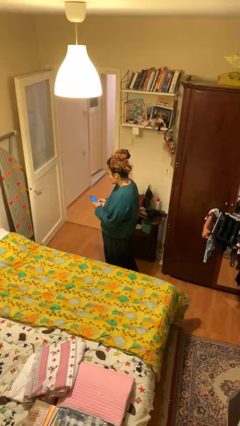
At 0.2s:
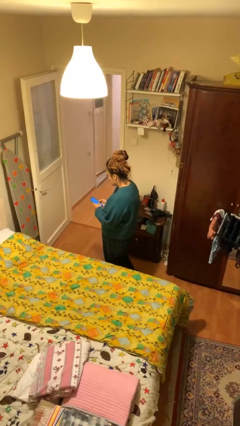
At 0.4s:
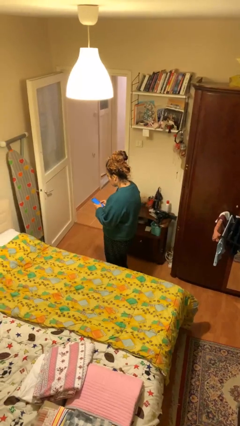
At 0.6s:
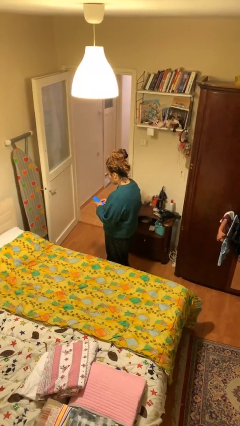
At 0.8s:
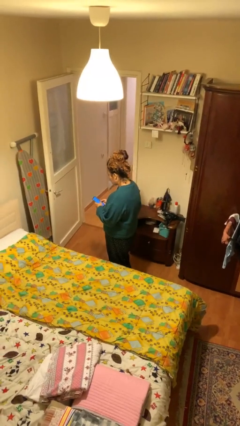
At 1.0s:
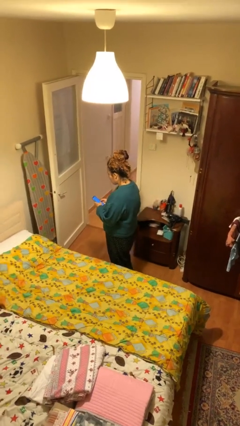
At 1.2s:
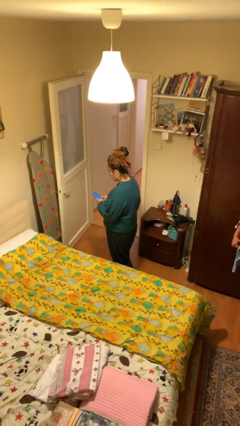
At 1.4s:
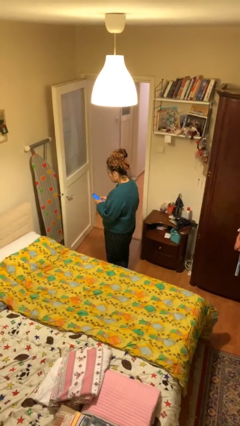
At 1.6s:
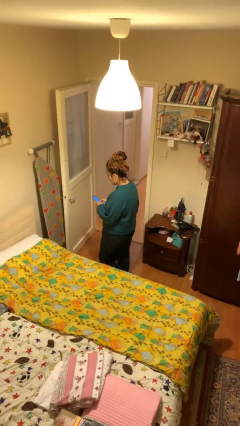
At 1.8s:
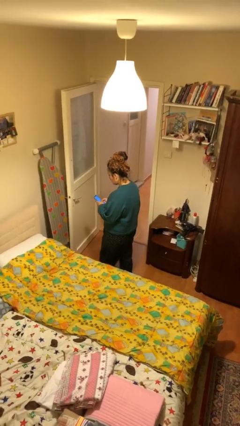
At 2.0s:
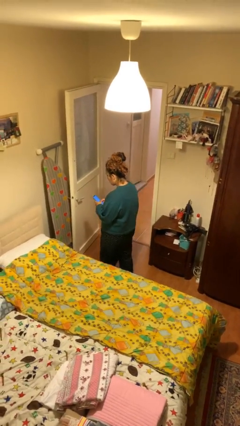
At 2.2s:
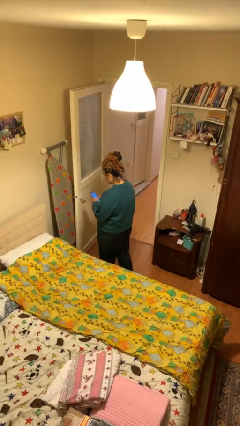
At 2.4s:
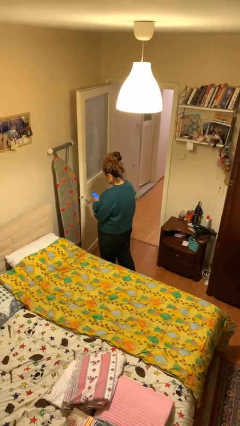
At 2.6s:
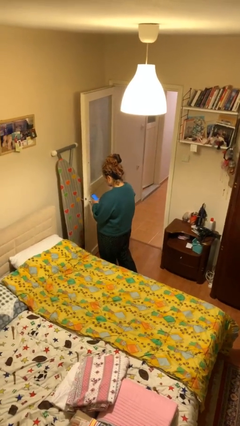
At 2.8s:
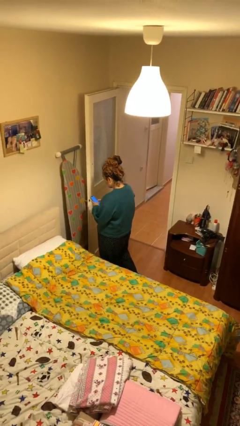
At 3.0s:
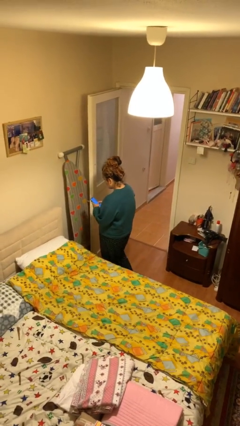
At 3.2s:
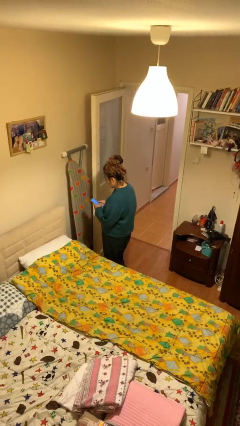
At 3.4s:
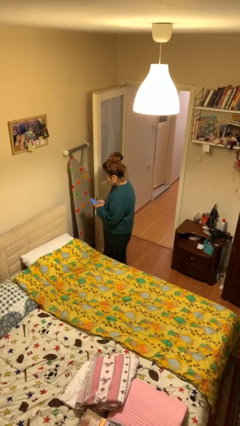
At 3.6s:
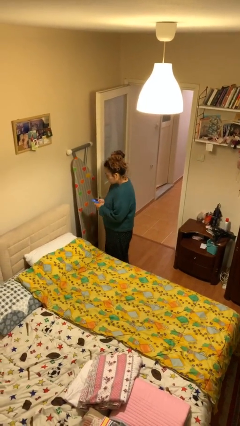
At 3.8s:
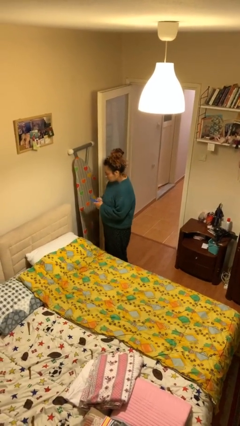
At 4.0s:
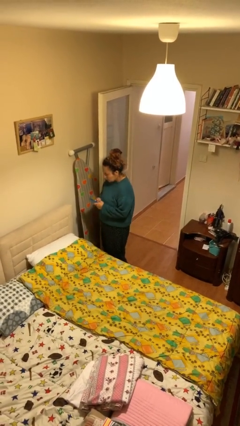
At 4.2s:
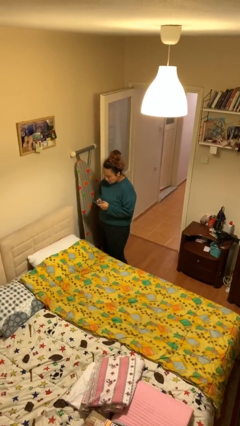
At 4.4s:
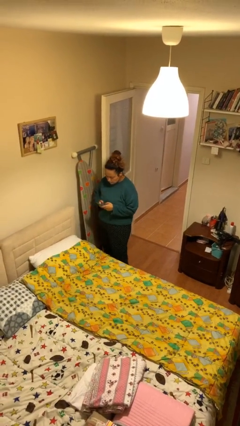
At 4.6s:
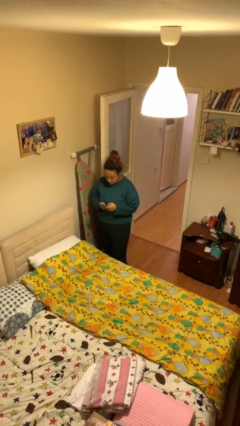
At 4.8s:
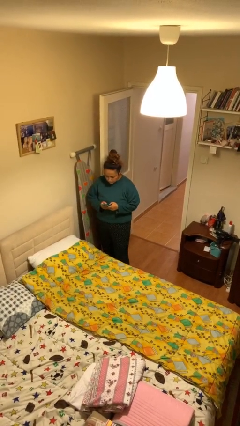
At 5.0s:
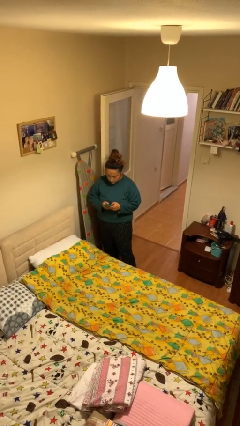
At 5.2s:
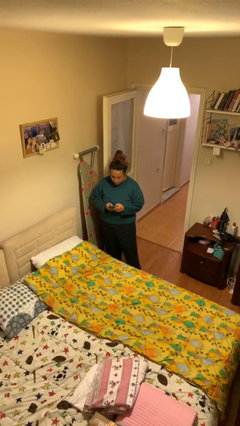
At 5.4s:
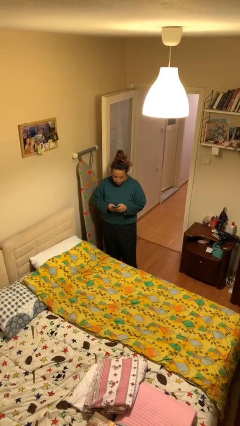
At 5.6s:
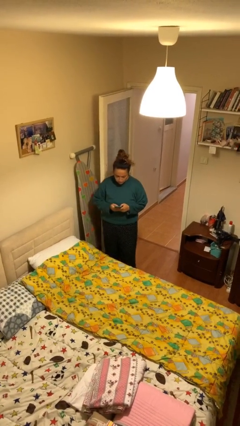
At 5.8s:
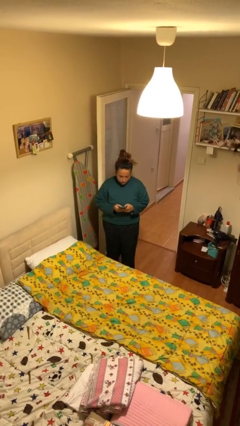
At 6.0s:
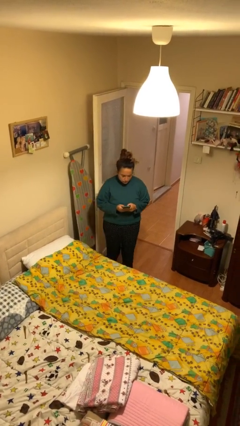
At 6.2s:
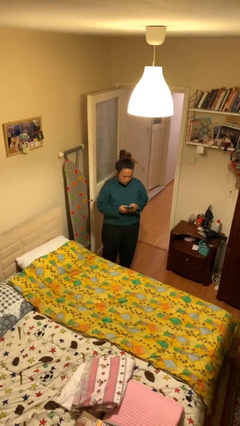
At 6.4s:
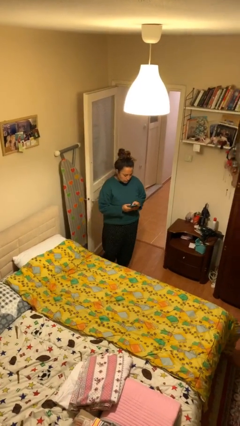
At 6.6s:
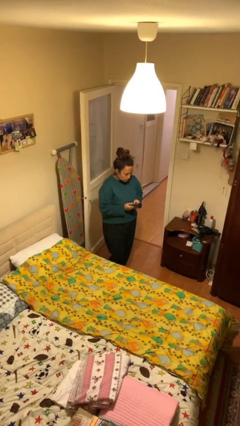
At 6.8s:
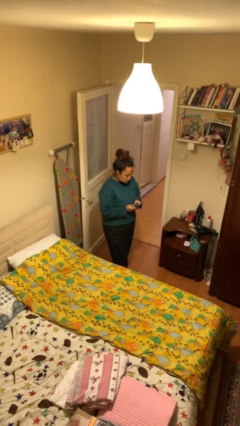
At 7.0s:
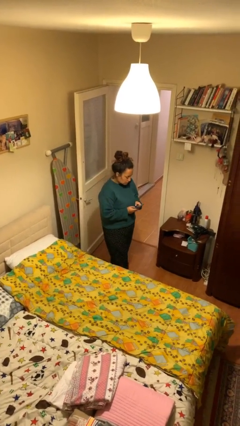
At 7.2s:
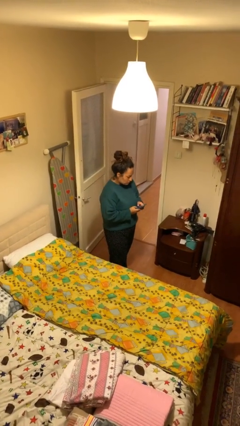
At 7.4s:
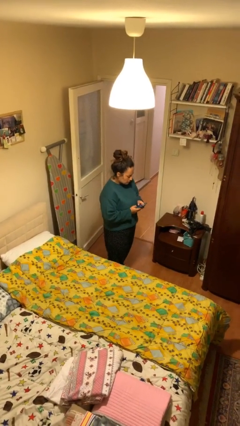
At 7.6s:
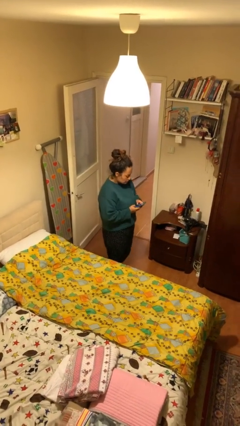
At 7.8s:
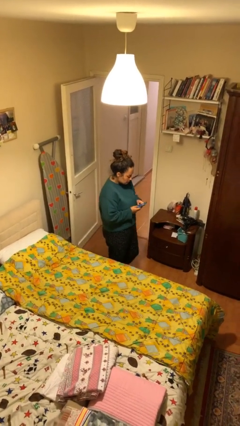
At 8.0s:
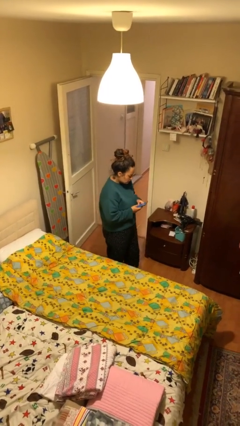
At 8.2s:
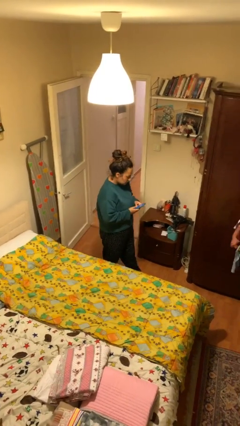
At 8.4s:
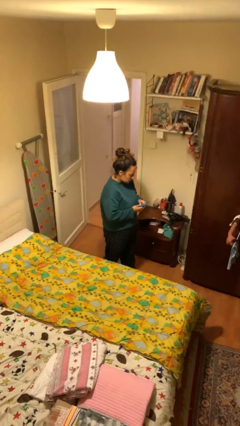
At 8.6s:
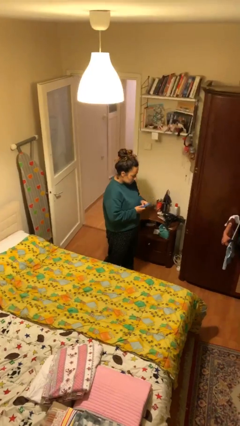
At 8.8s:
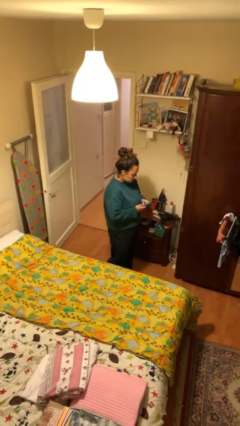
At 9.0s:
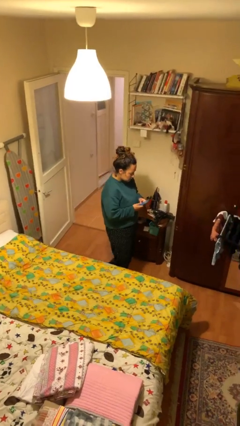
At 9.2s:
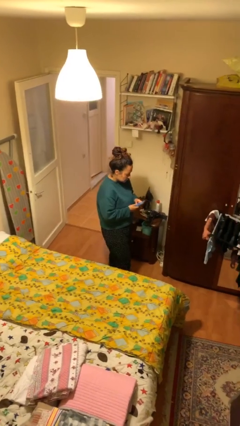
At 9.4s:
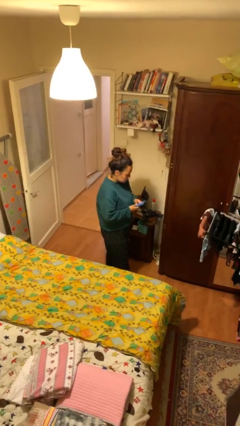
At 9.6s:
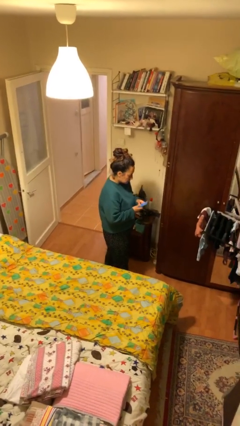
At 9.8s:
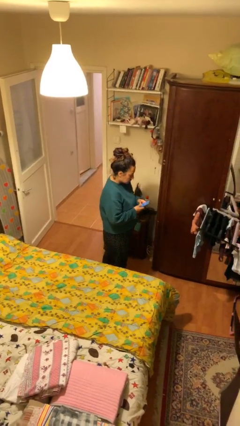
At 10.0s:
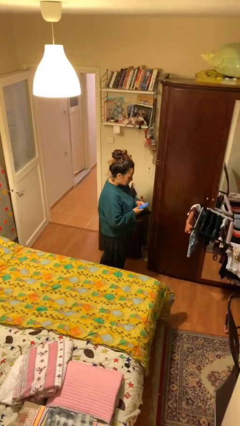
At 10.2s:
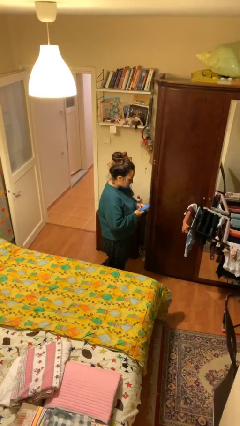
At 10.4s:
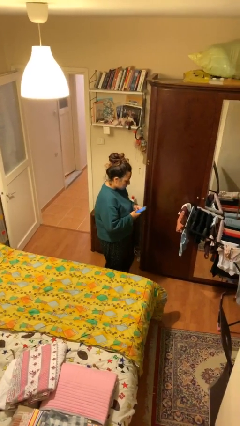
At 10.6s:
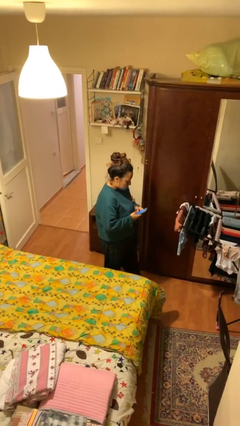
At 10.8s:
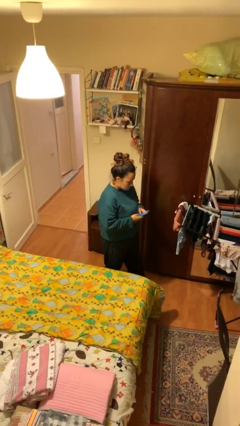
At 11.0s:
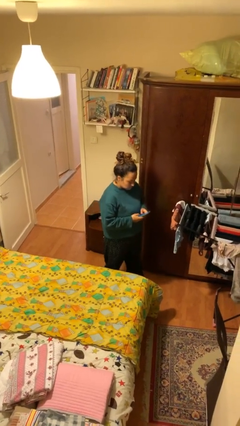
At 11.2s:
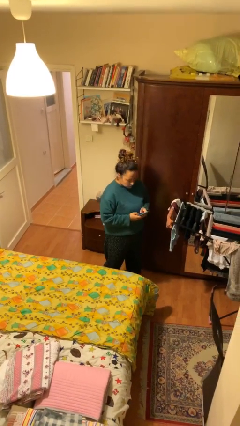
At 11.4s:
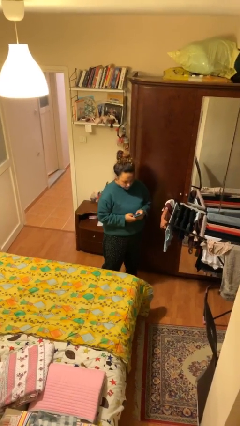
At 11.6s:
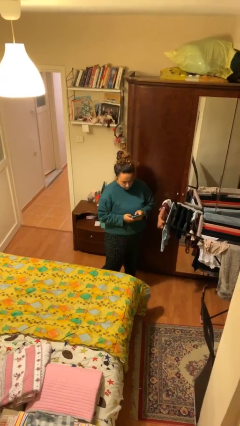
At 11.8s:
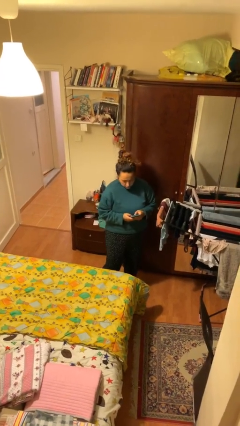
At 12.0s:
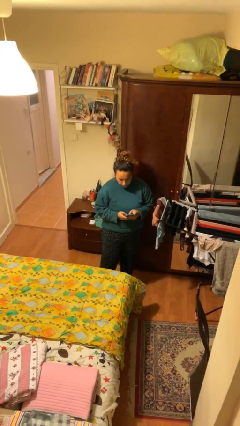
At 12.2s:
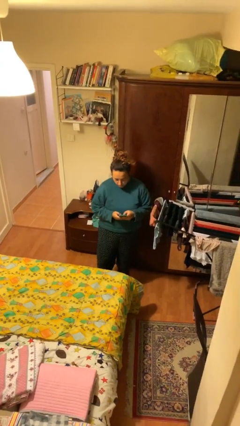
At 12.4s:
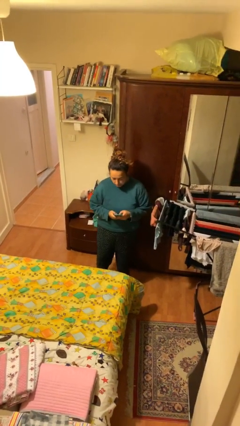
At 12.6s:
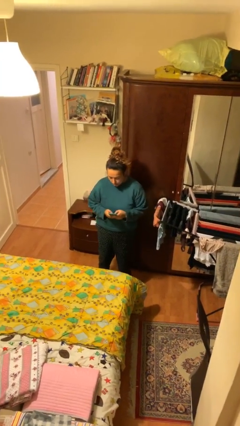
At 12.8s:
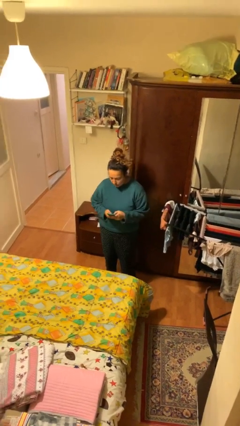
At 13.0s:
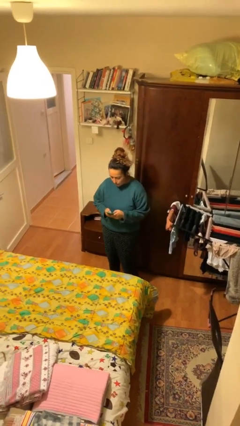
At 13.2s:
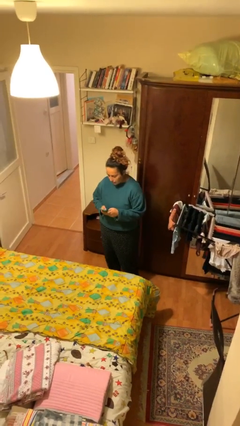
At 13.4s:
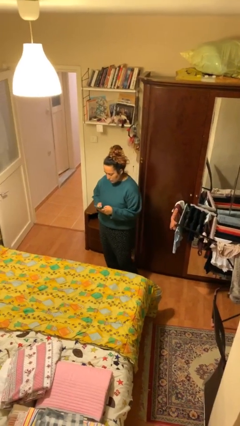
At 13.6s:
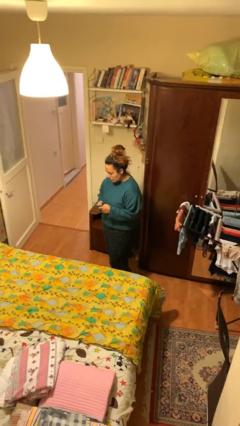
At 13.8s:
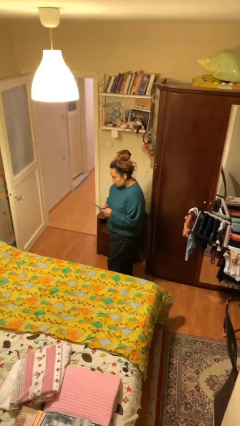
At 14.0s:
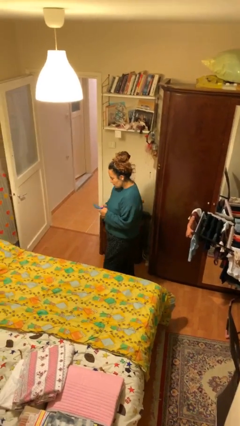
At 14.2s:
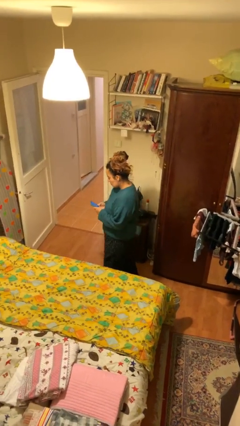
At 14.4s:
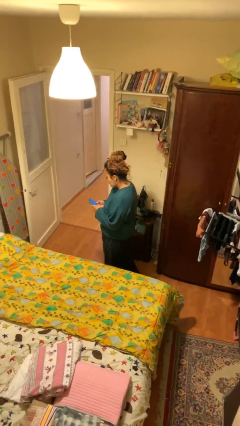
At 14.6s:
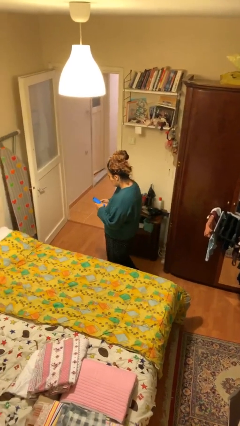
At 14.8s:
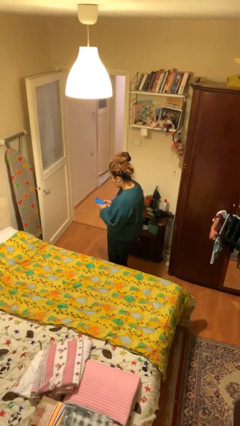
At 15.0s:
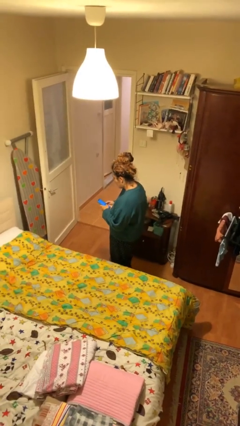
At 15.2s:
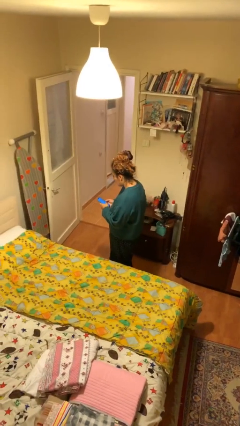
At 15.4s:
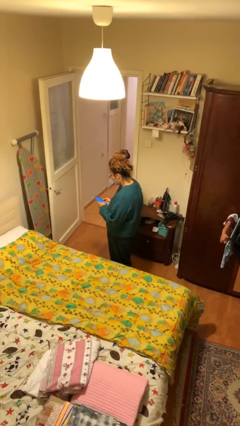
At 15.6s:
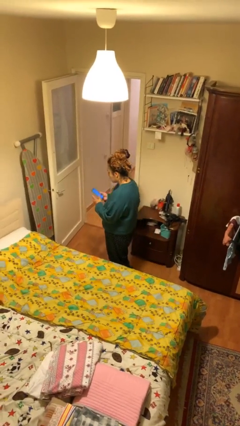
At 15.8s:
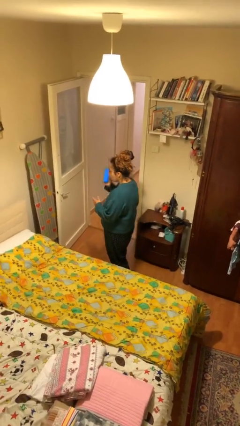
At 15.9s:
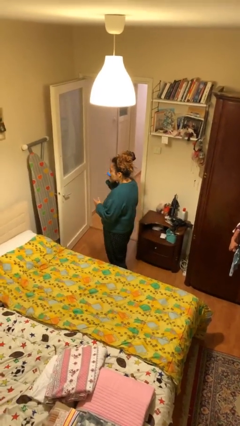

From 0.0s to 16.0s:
person texts on phone

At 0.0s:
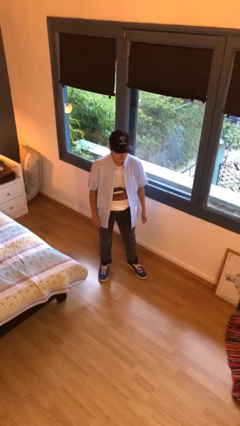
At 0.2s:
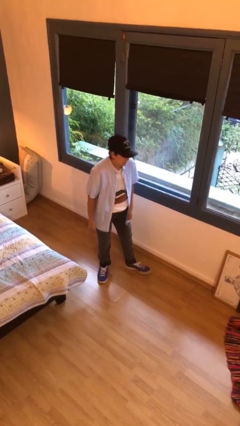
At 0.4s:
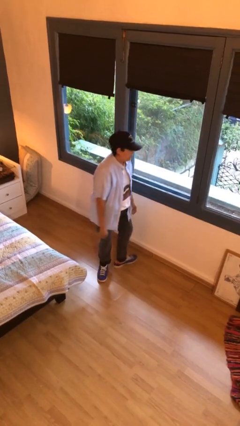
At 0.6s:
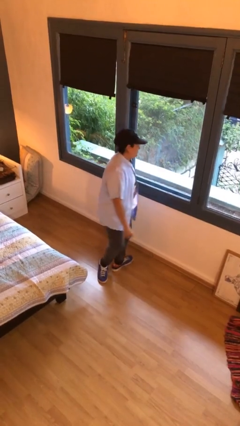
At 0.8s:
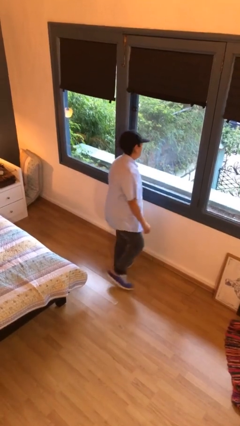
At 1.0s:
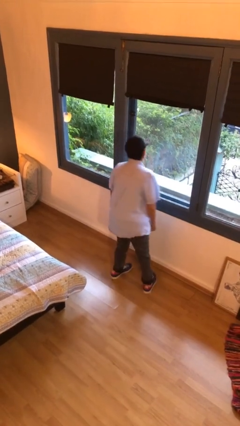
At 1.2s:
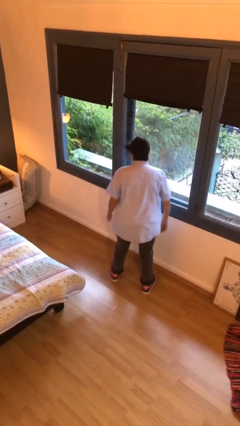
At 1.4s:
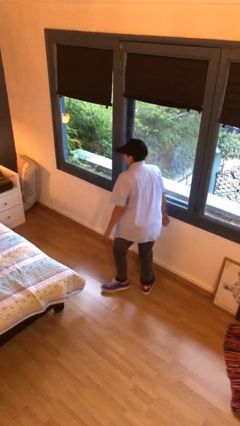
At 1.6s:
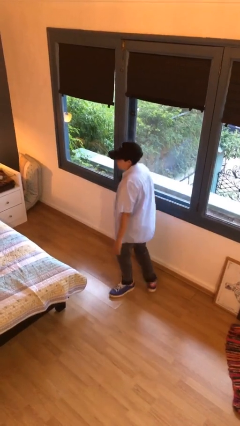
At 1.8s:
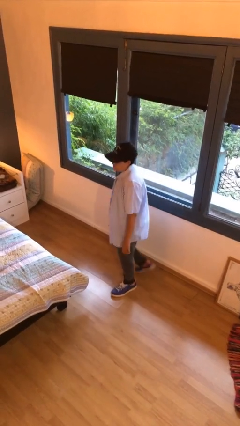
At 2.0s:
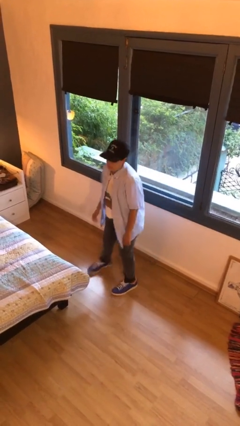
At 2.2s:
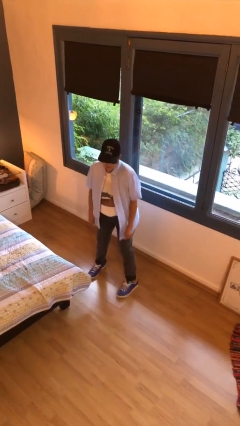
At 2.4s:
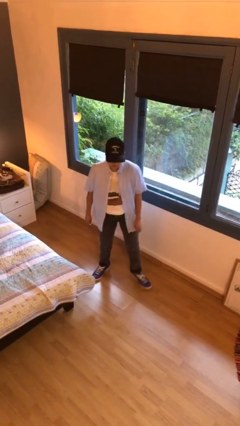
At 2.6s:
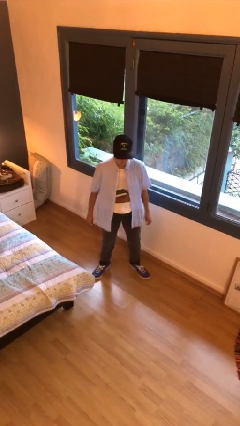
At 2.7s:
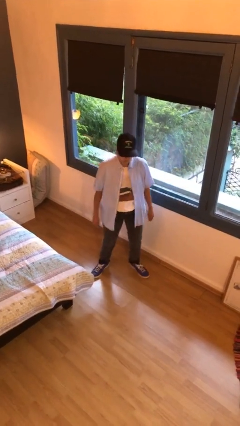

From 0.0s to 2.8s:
person twirls
